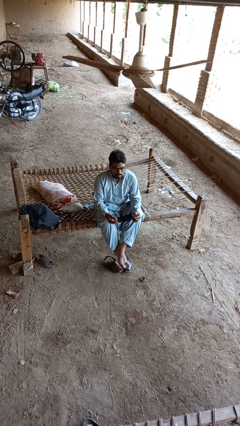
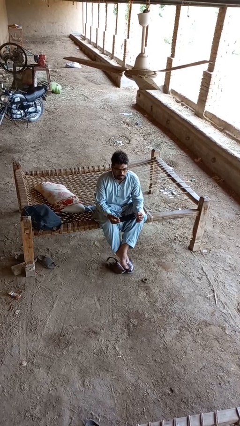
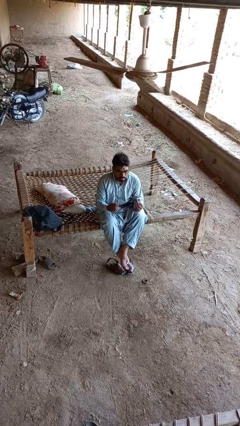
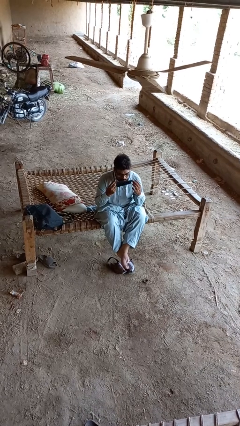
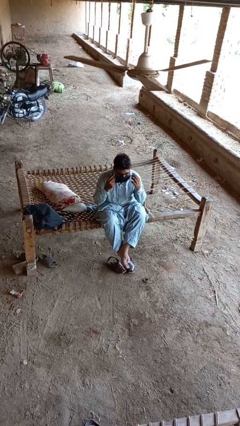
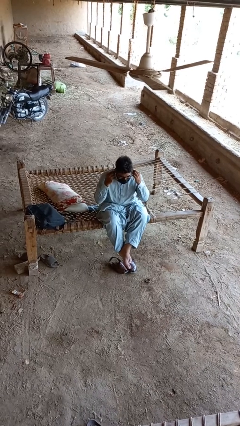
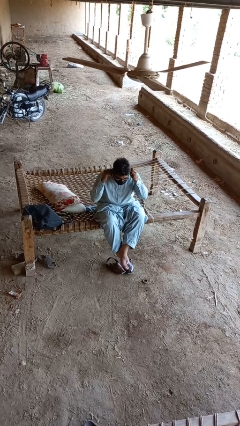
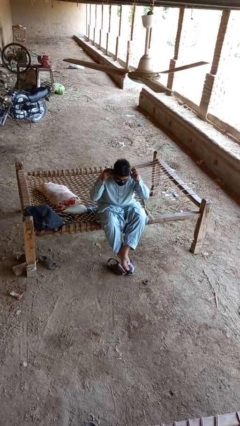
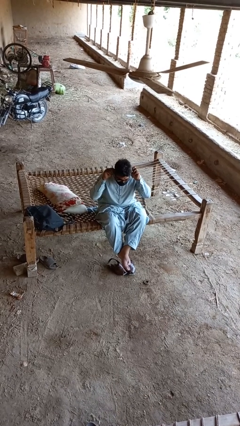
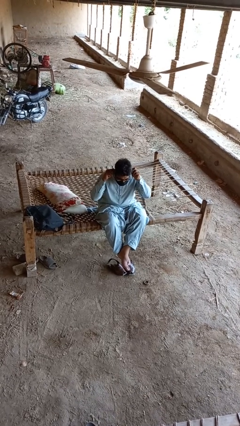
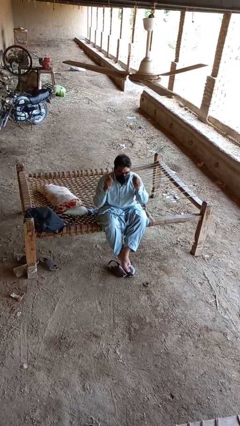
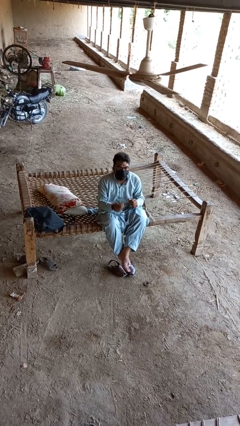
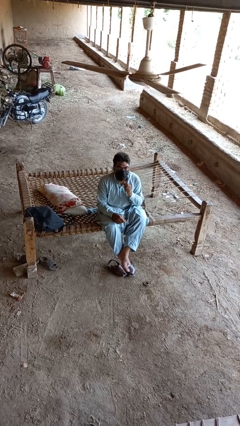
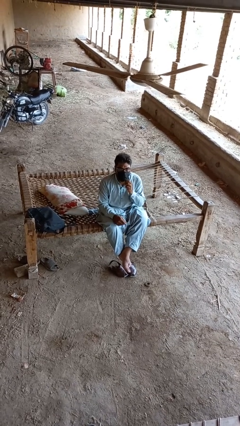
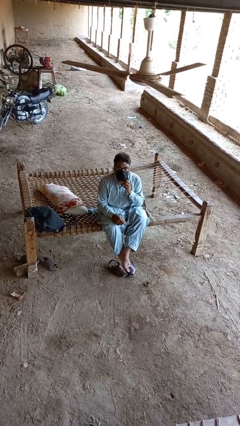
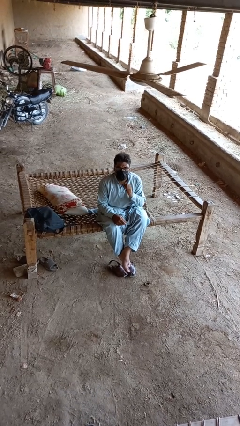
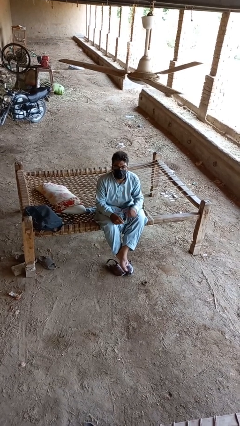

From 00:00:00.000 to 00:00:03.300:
person puts on facemask

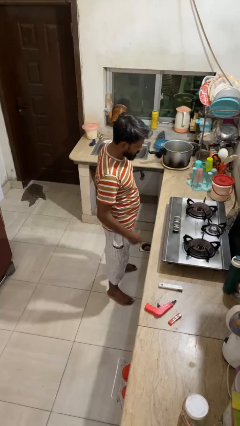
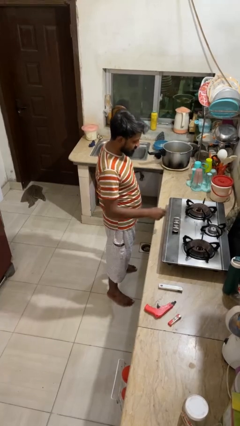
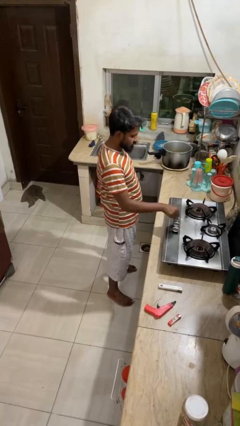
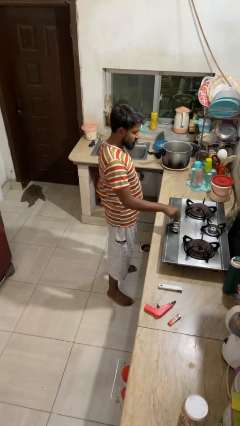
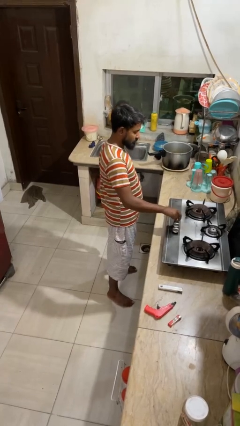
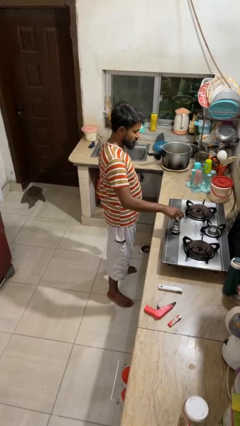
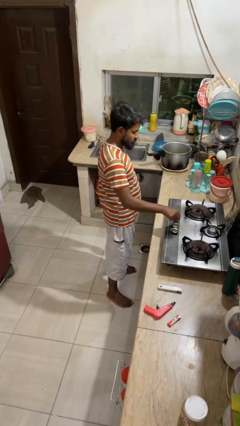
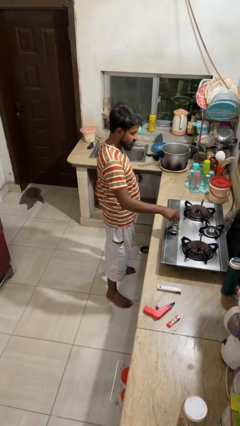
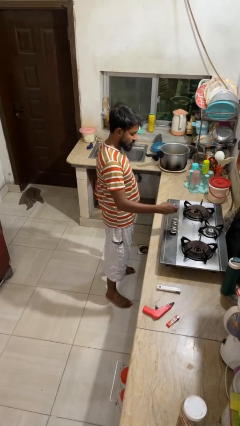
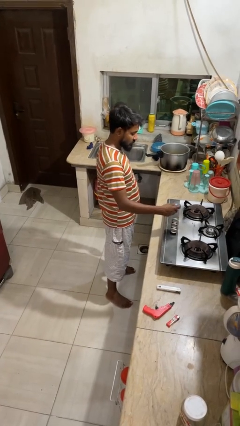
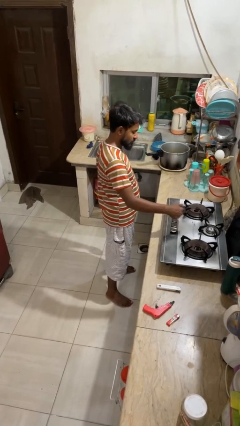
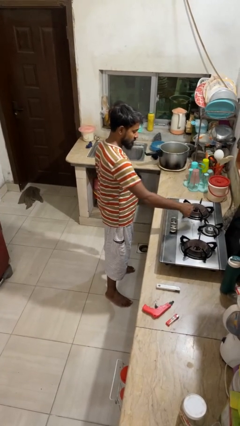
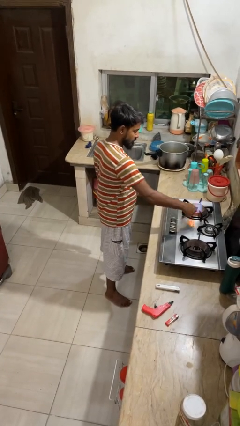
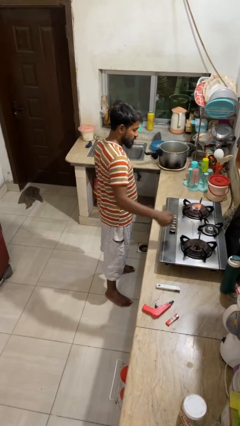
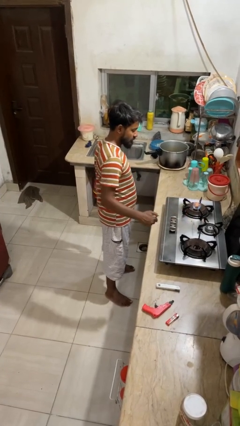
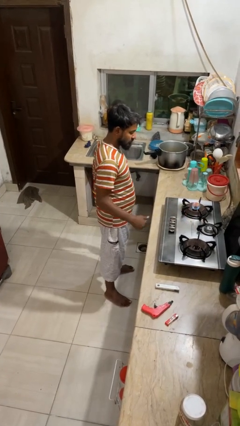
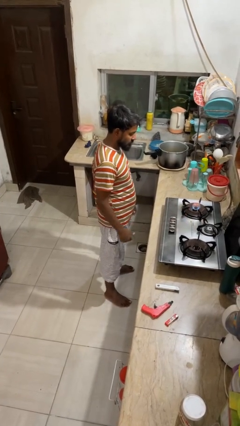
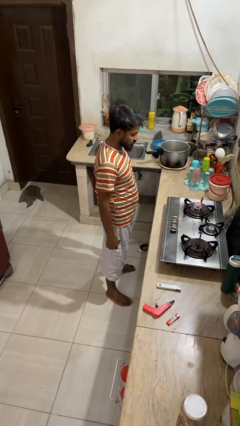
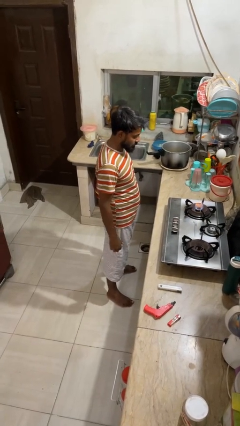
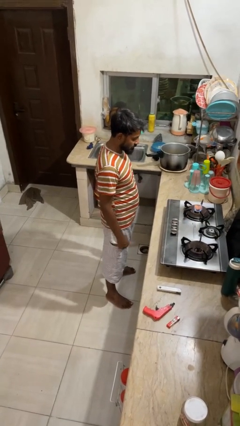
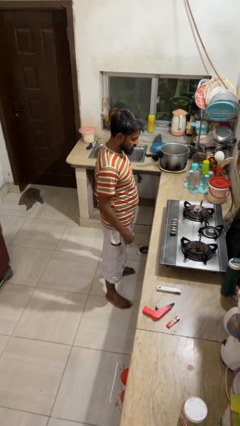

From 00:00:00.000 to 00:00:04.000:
person turns on stovetop

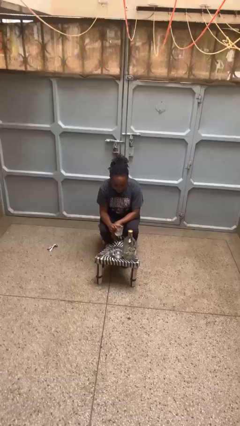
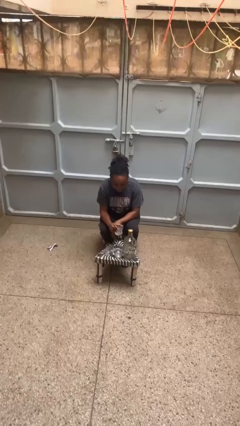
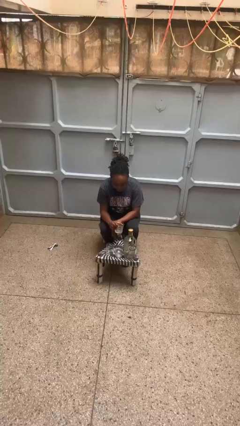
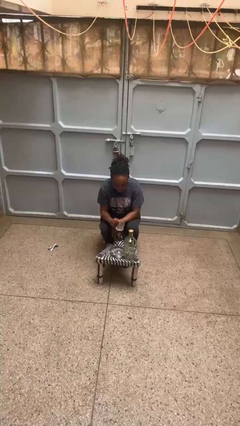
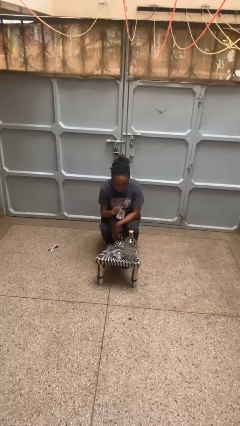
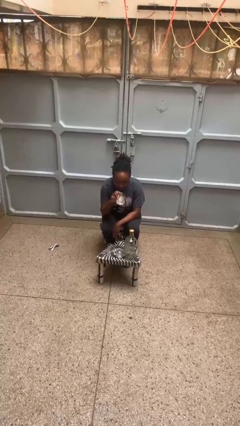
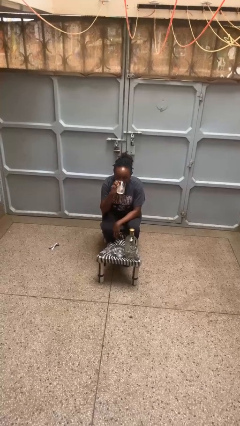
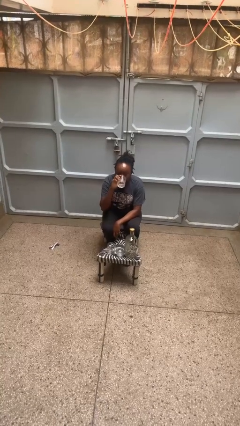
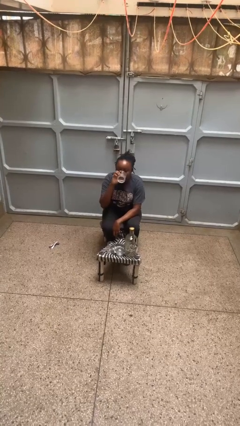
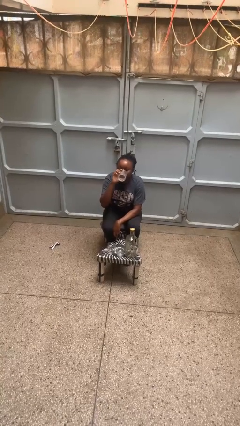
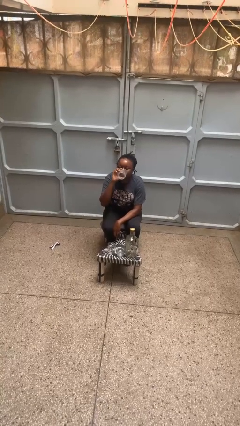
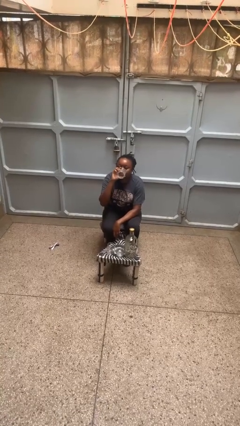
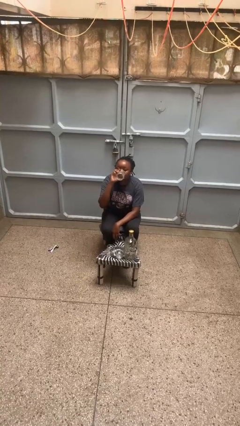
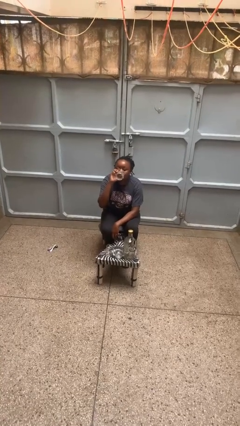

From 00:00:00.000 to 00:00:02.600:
person drinks from shotglass

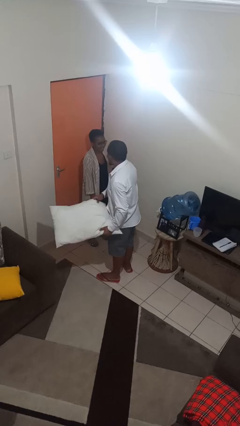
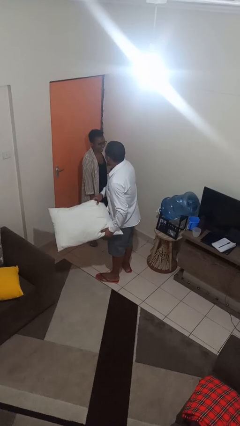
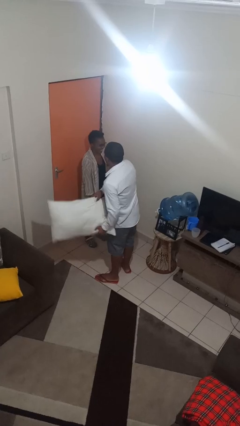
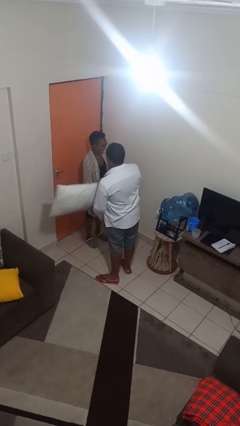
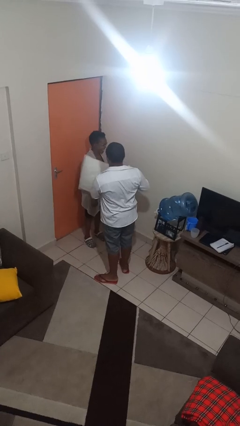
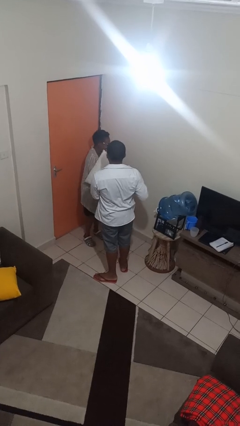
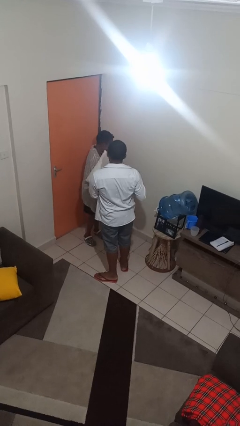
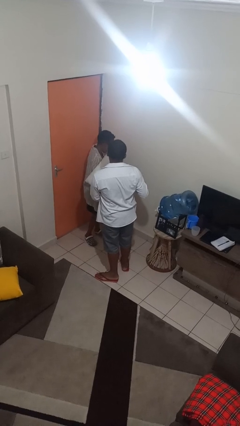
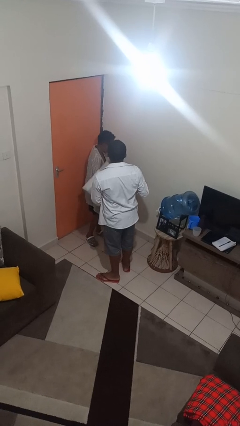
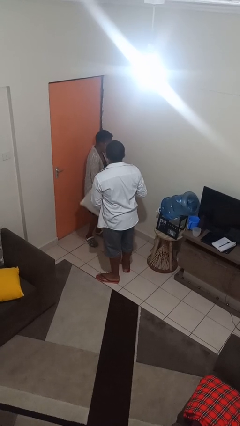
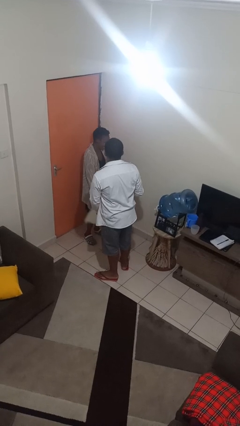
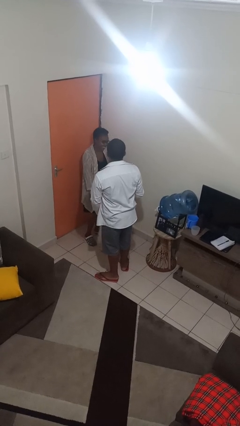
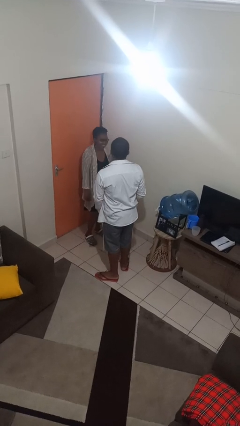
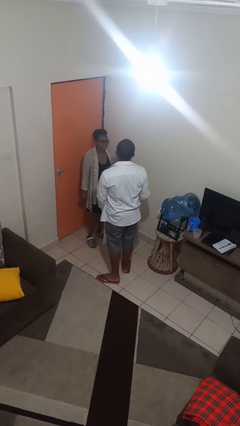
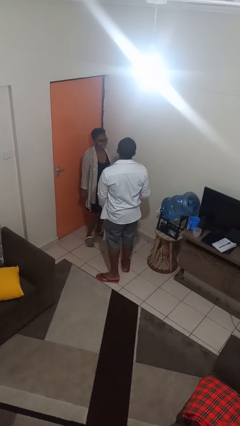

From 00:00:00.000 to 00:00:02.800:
person hits person with pillow

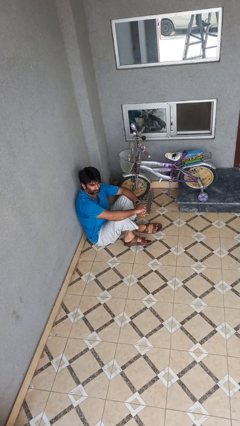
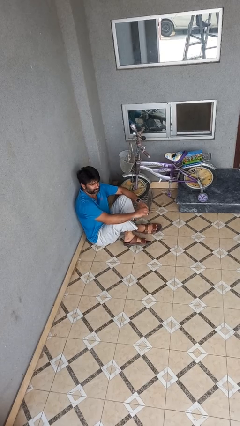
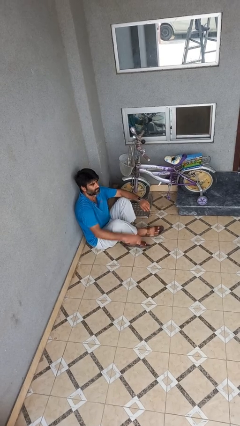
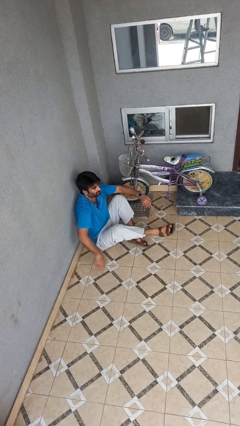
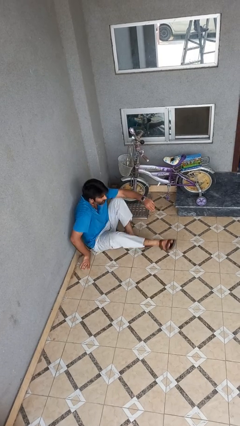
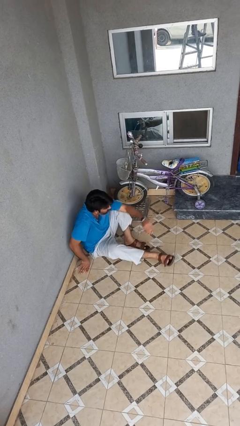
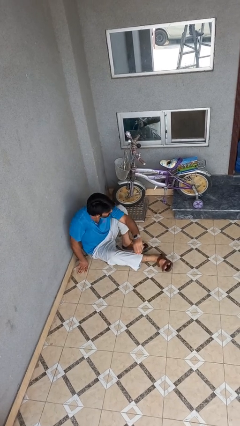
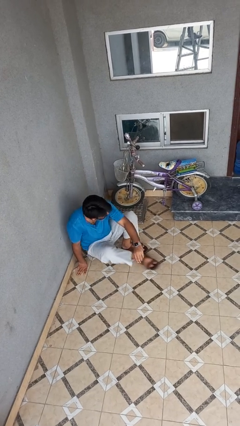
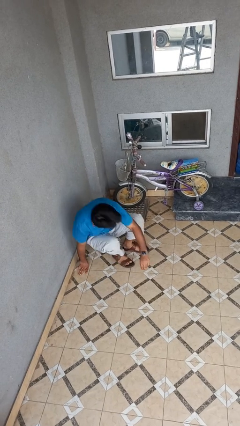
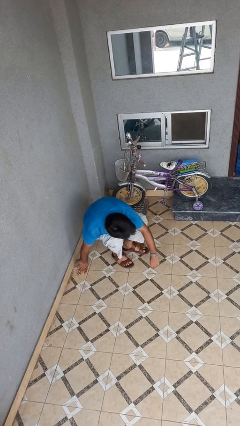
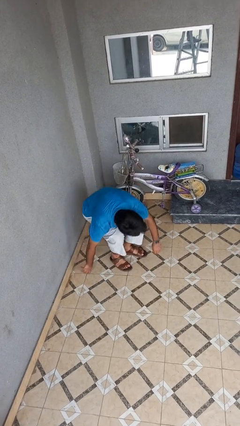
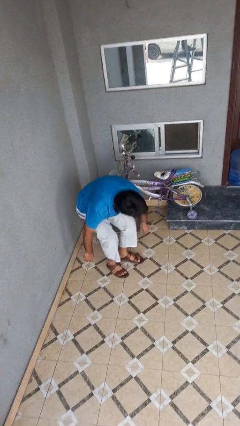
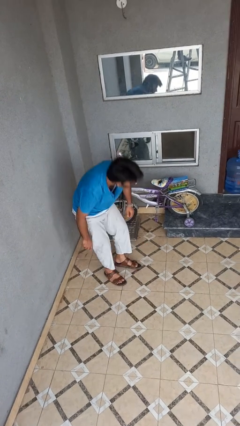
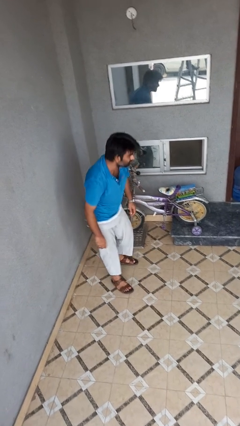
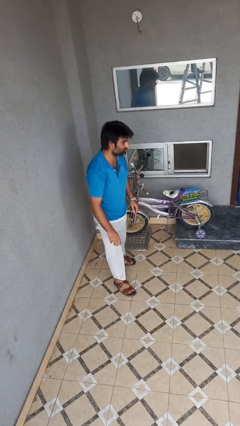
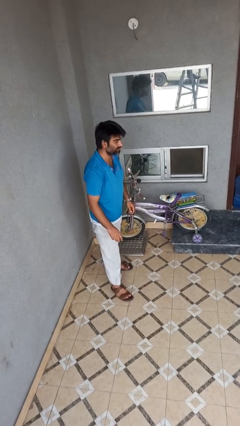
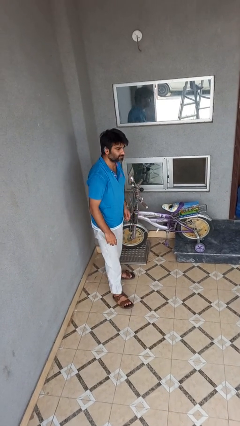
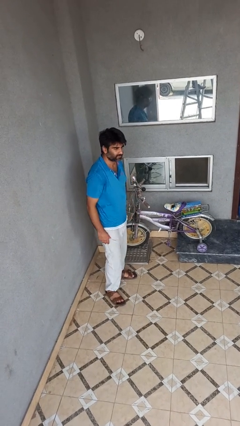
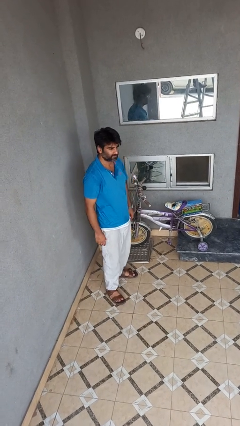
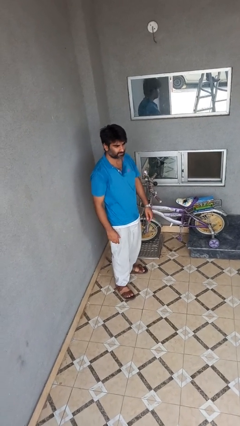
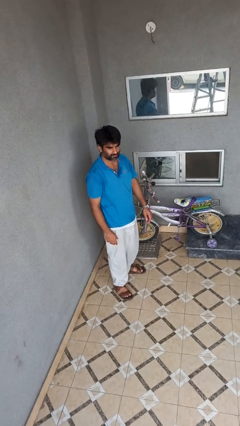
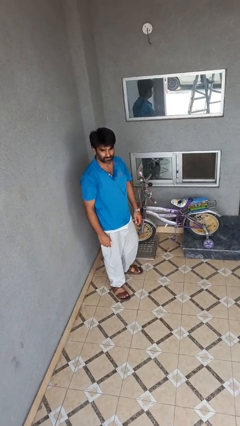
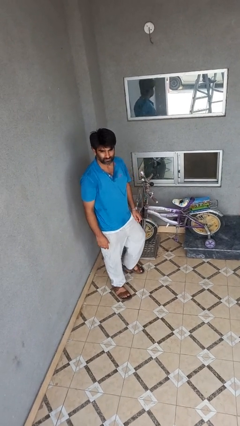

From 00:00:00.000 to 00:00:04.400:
person stands up from floor
